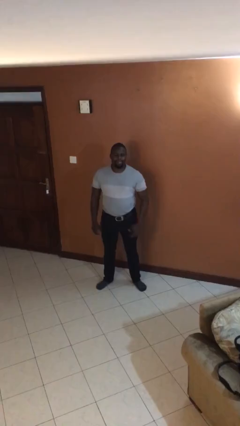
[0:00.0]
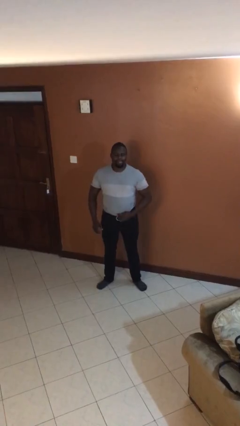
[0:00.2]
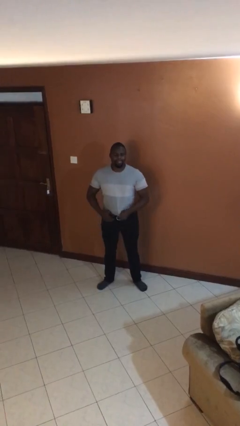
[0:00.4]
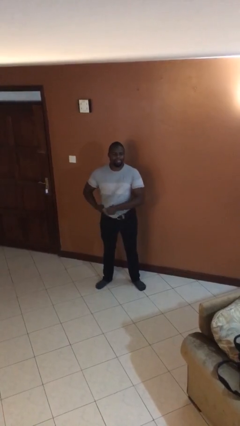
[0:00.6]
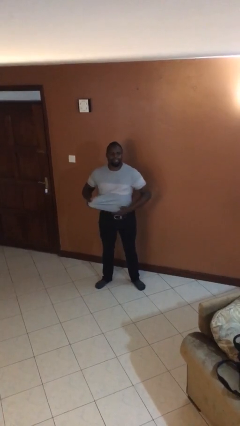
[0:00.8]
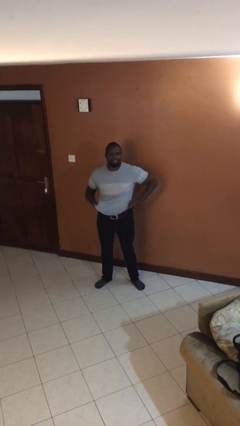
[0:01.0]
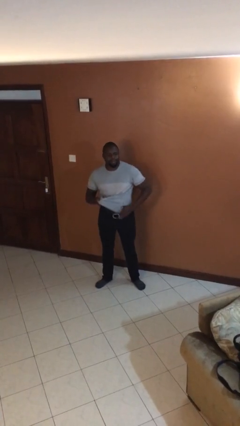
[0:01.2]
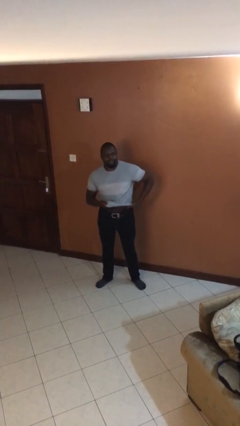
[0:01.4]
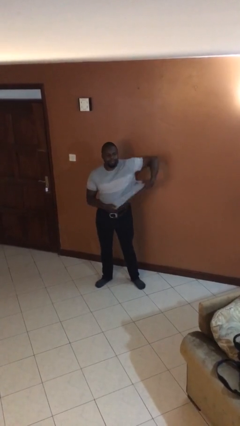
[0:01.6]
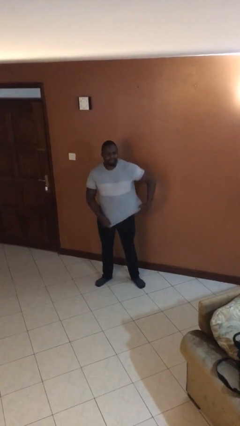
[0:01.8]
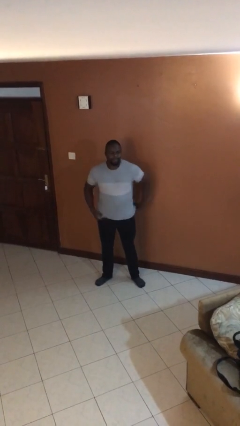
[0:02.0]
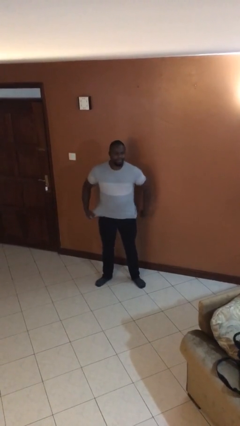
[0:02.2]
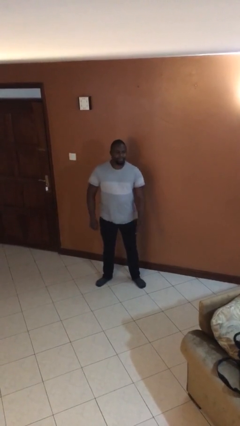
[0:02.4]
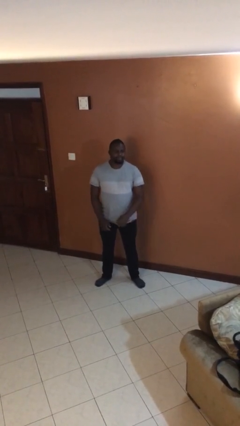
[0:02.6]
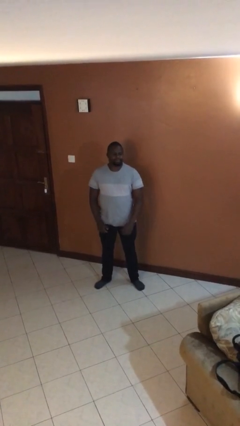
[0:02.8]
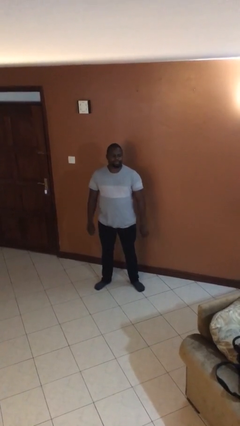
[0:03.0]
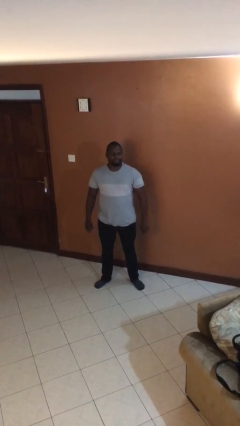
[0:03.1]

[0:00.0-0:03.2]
person untucks shirt

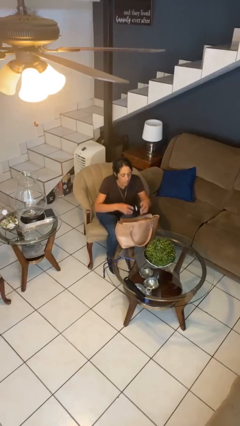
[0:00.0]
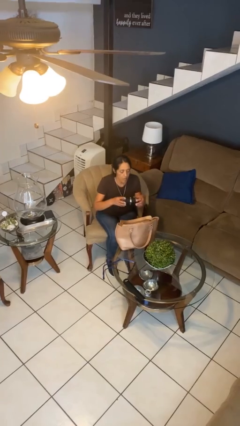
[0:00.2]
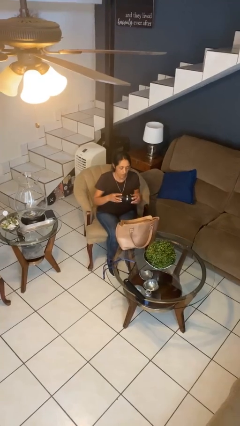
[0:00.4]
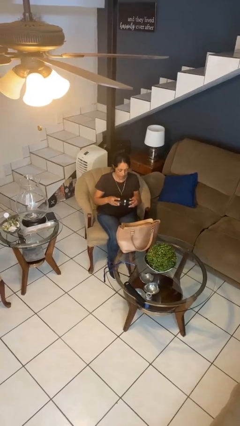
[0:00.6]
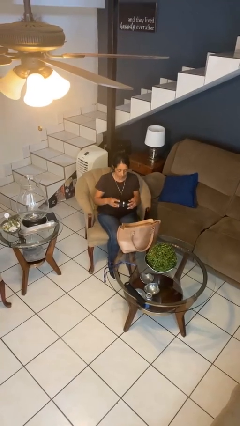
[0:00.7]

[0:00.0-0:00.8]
person takes object from purse

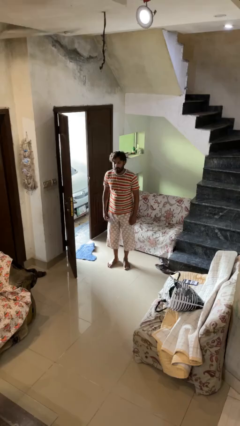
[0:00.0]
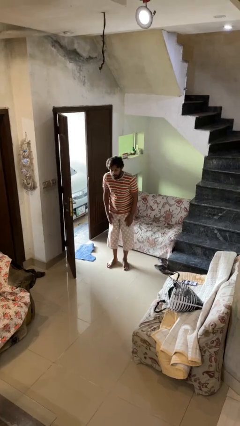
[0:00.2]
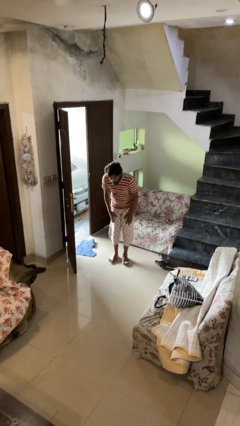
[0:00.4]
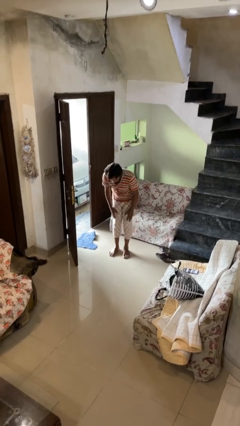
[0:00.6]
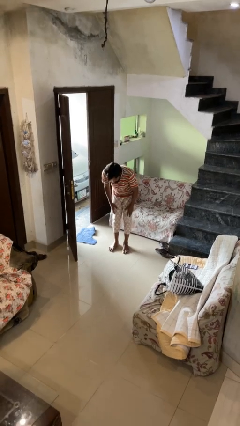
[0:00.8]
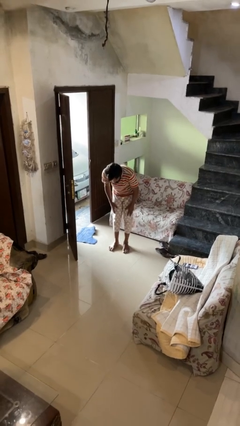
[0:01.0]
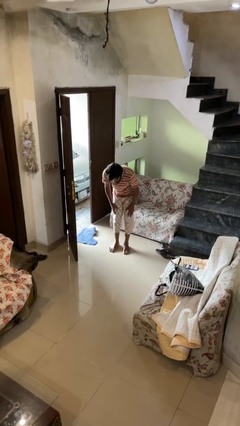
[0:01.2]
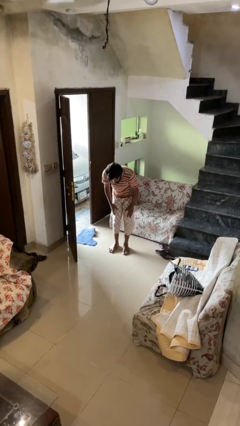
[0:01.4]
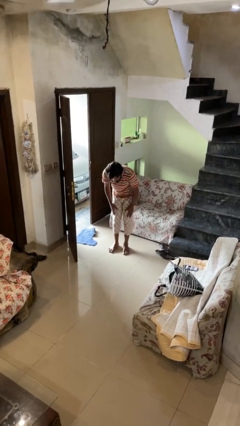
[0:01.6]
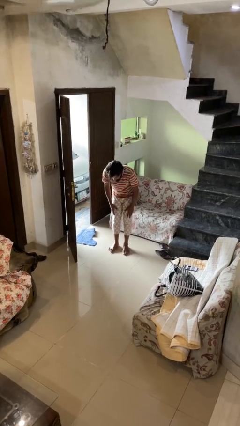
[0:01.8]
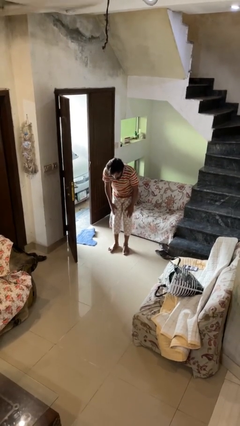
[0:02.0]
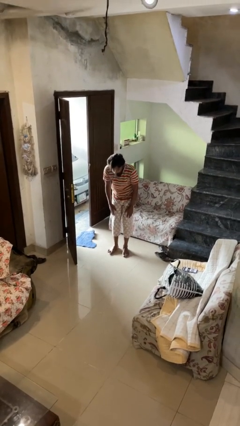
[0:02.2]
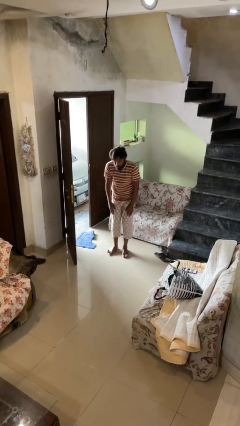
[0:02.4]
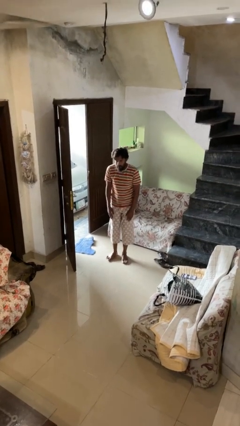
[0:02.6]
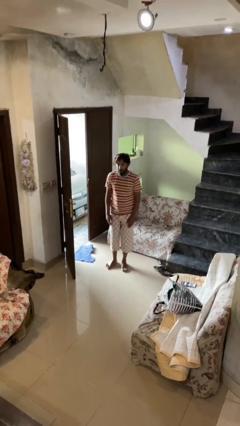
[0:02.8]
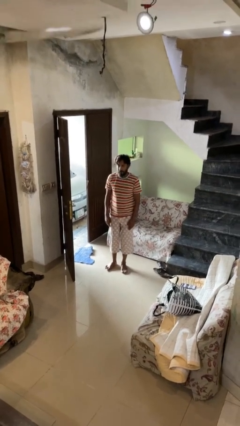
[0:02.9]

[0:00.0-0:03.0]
person bows

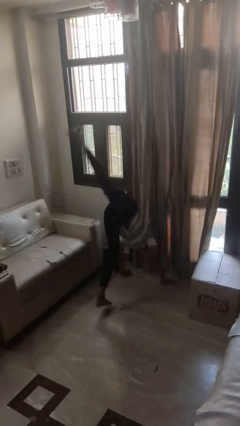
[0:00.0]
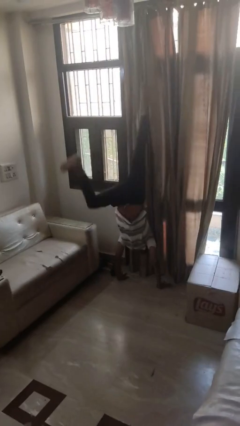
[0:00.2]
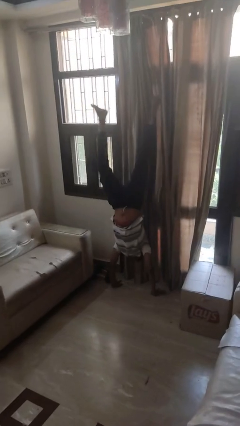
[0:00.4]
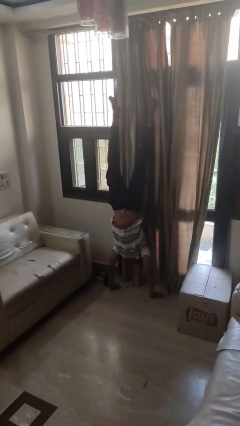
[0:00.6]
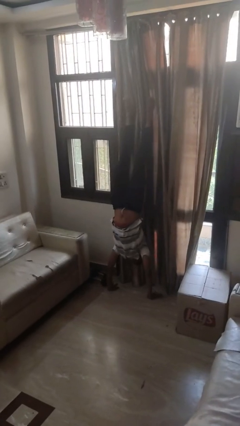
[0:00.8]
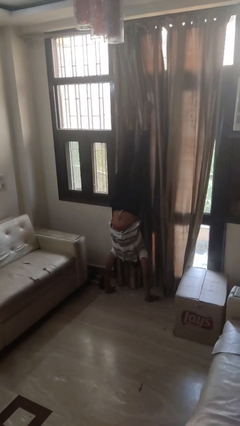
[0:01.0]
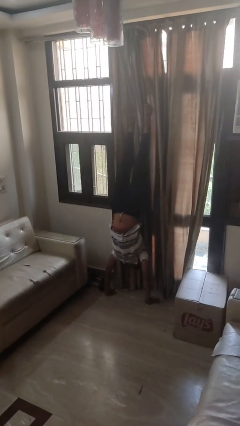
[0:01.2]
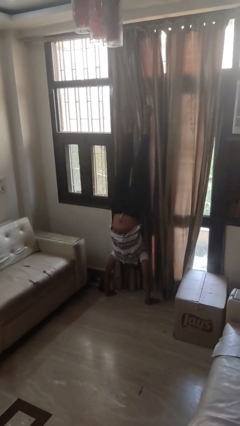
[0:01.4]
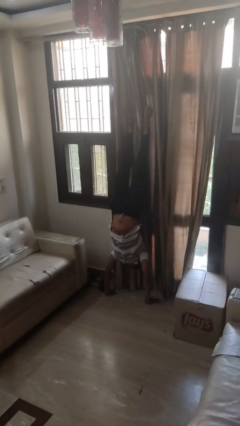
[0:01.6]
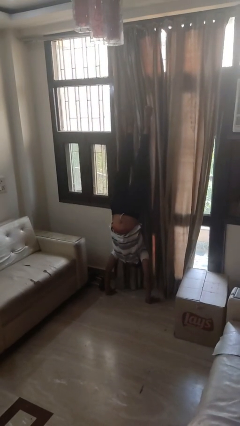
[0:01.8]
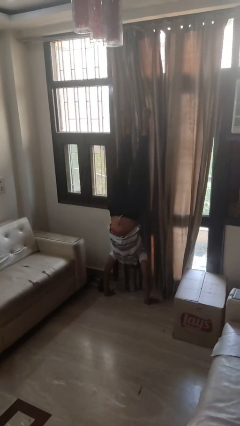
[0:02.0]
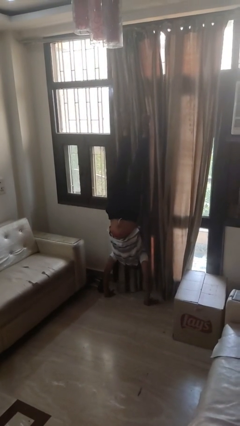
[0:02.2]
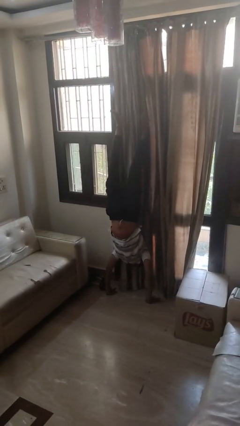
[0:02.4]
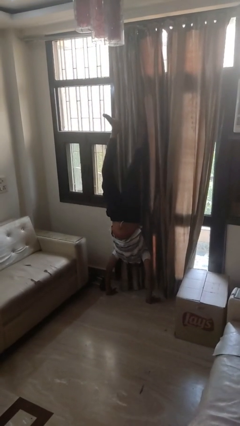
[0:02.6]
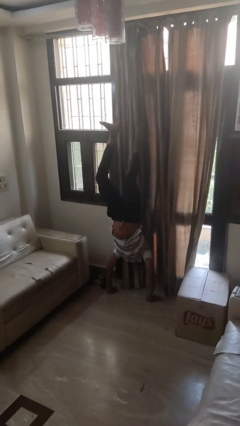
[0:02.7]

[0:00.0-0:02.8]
person handstand

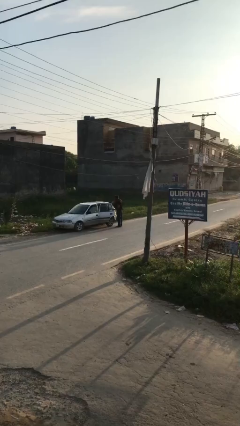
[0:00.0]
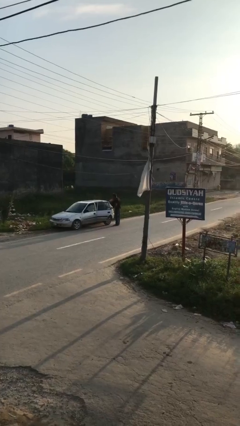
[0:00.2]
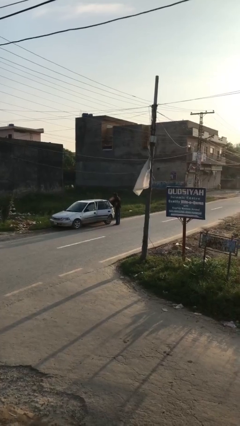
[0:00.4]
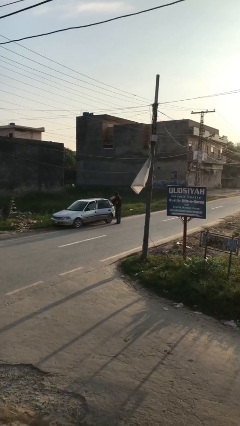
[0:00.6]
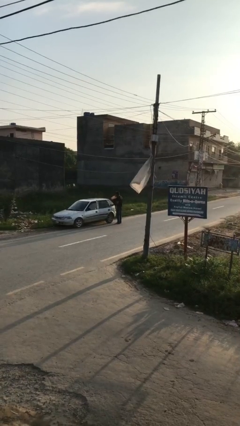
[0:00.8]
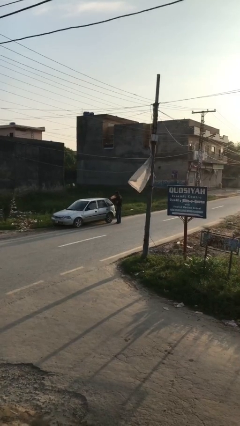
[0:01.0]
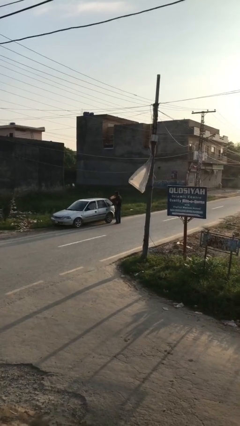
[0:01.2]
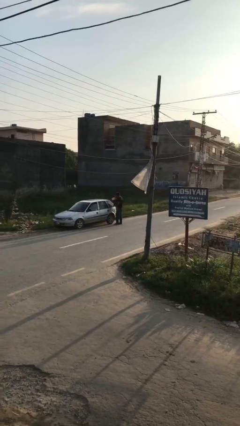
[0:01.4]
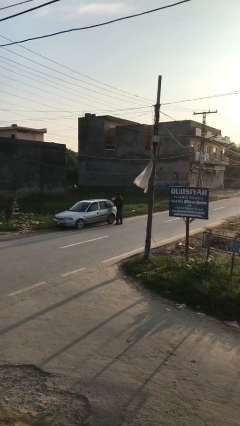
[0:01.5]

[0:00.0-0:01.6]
person closes car door

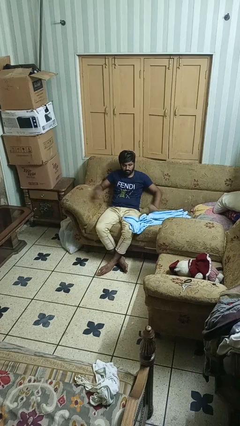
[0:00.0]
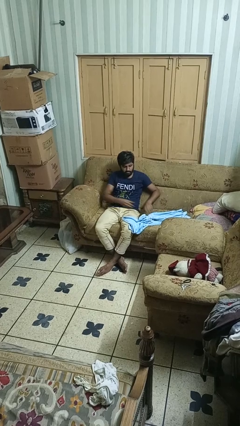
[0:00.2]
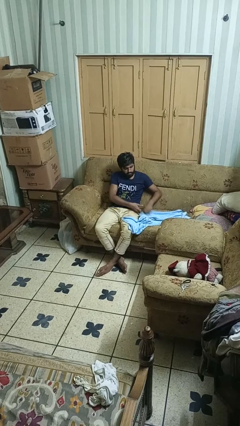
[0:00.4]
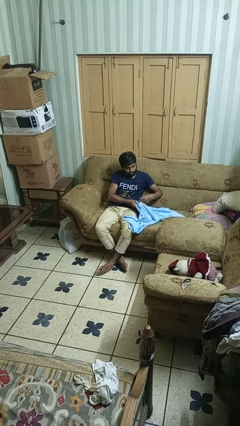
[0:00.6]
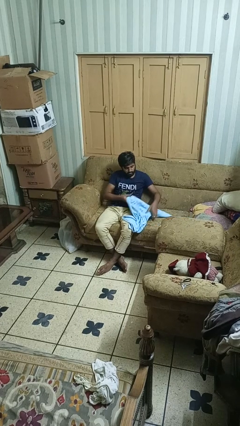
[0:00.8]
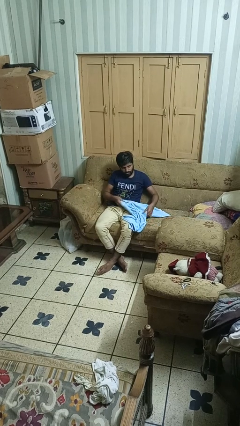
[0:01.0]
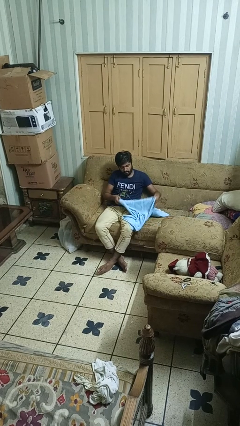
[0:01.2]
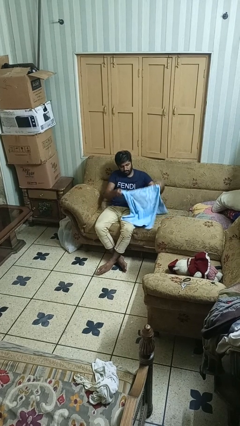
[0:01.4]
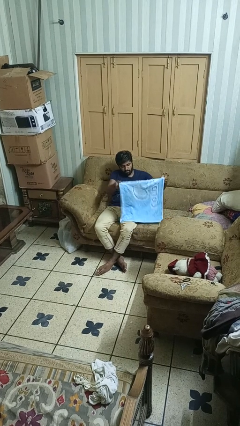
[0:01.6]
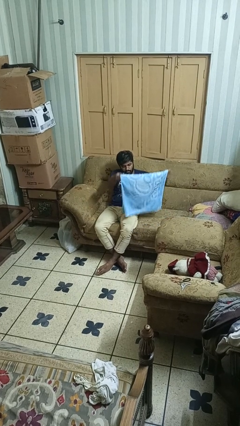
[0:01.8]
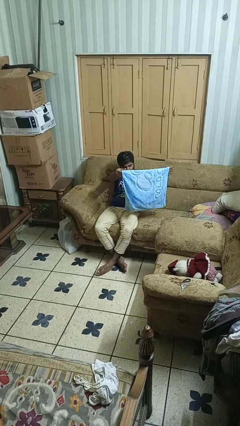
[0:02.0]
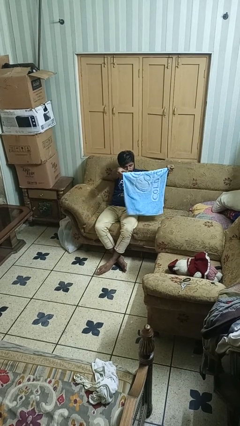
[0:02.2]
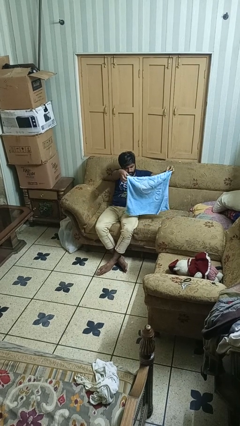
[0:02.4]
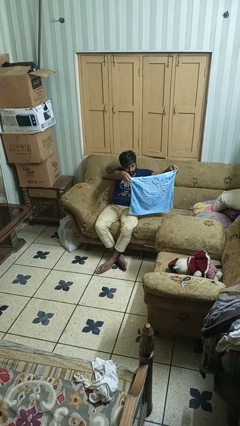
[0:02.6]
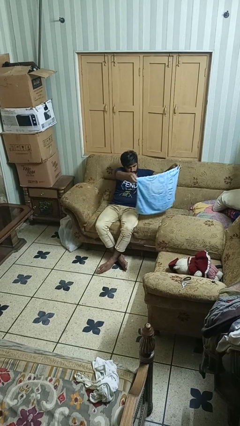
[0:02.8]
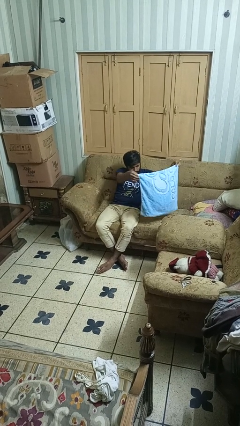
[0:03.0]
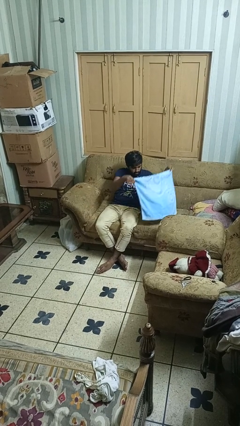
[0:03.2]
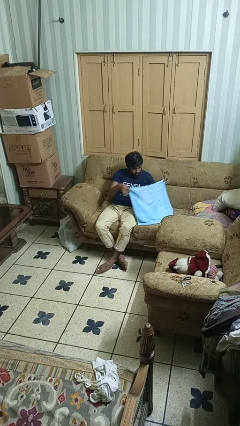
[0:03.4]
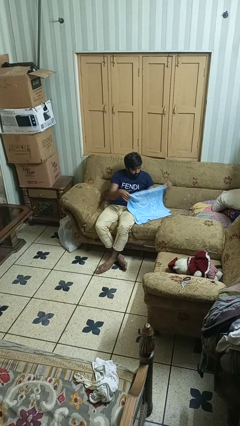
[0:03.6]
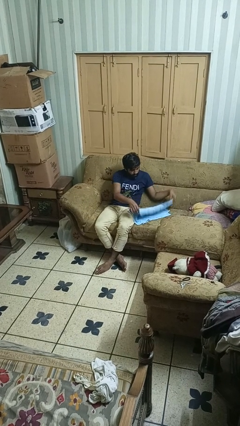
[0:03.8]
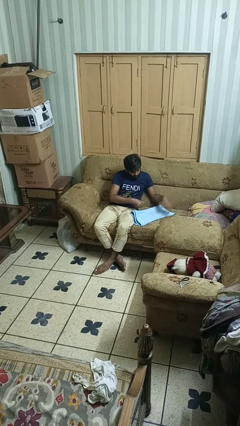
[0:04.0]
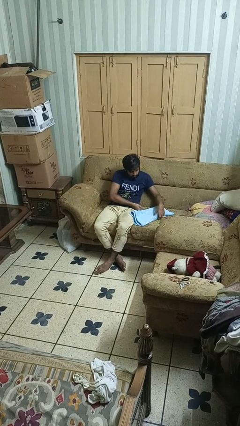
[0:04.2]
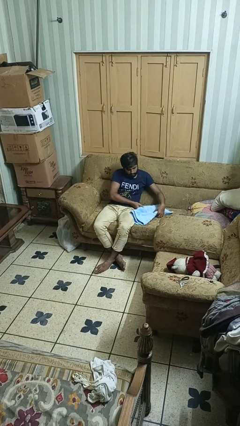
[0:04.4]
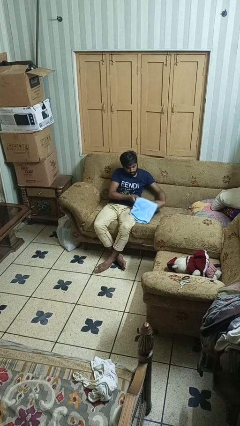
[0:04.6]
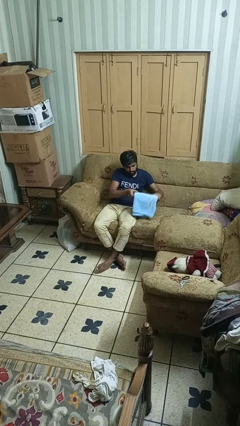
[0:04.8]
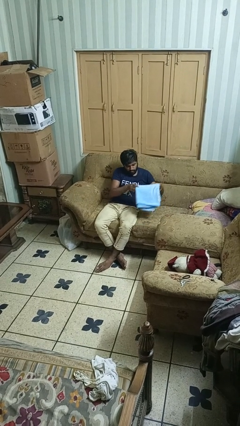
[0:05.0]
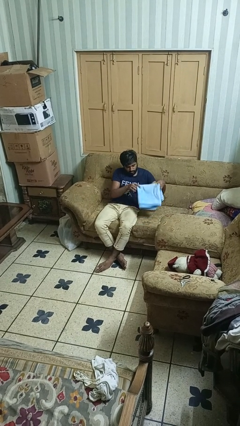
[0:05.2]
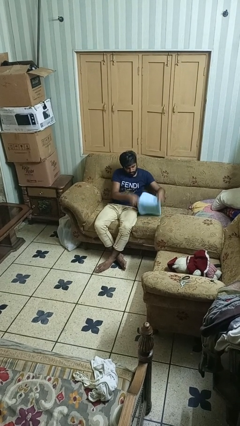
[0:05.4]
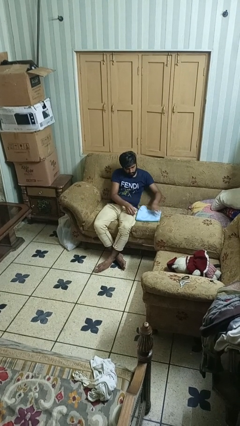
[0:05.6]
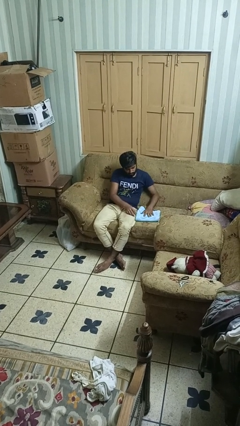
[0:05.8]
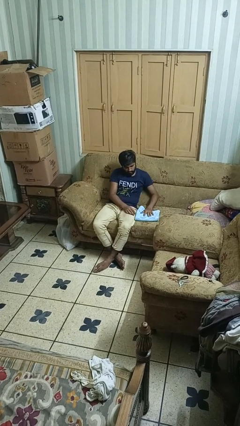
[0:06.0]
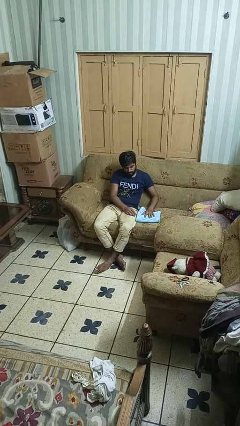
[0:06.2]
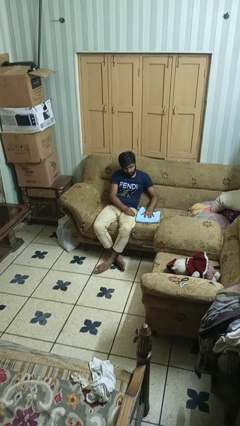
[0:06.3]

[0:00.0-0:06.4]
person folds towel
